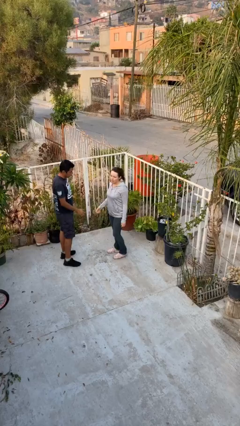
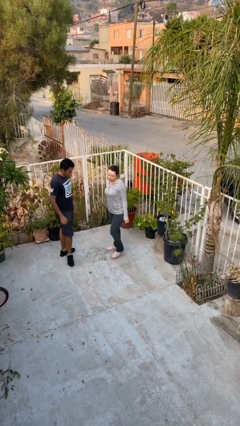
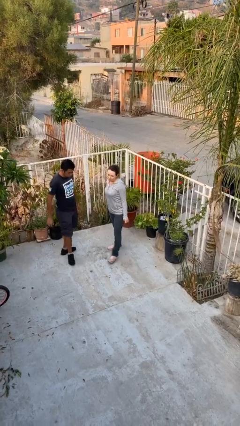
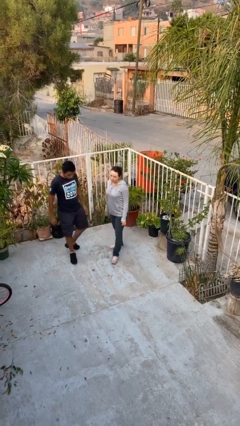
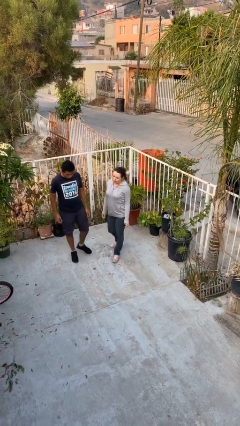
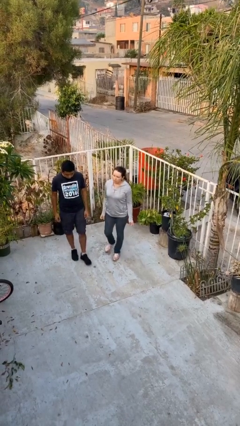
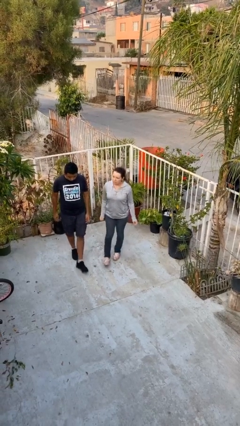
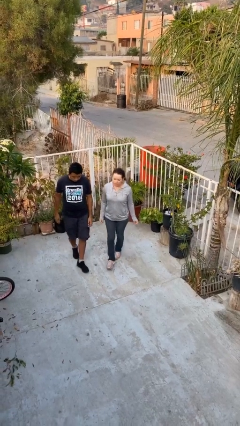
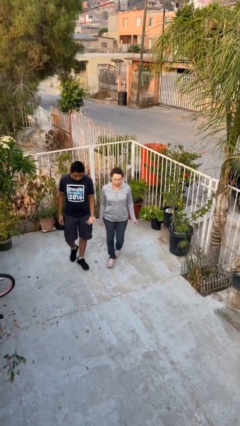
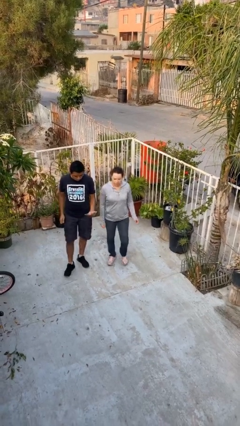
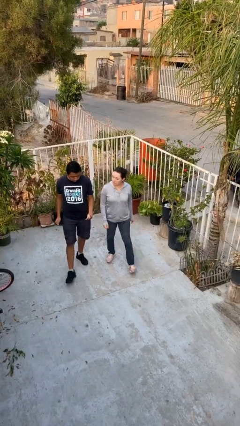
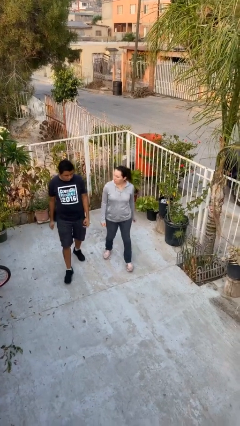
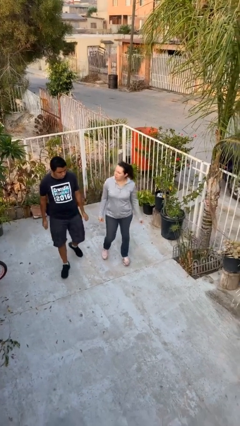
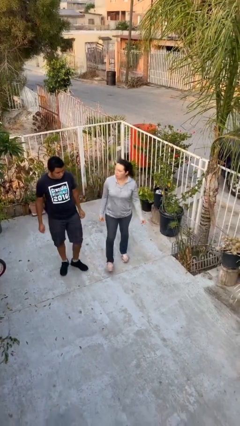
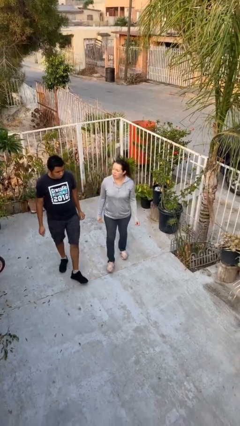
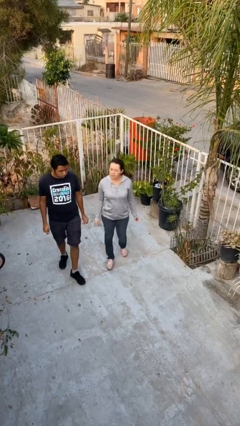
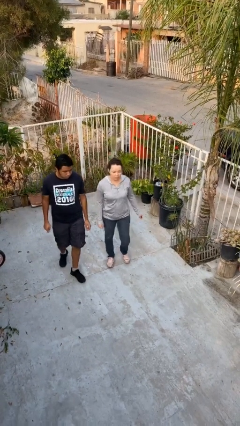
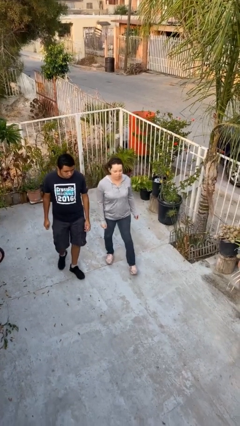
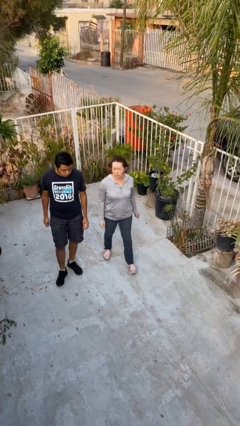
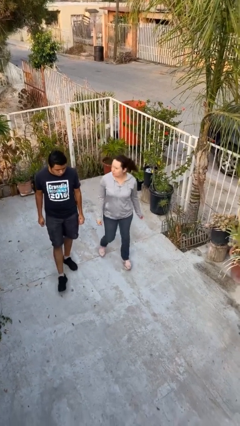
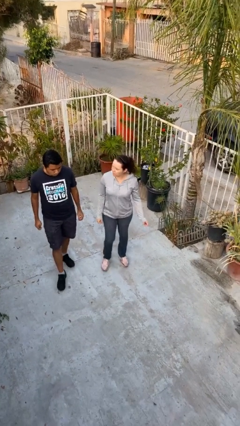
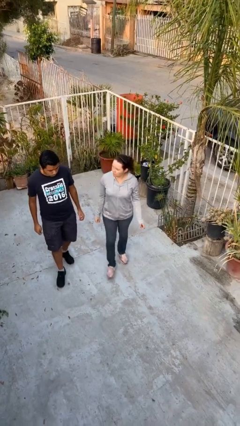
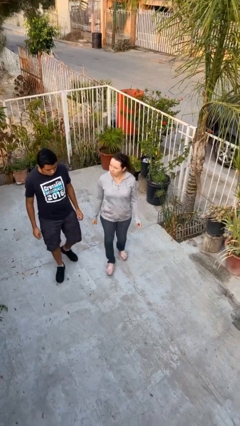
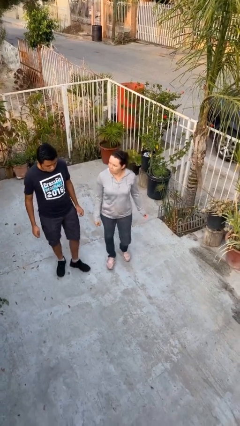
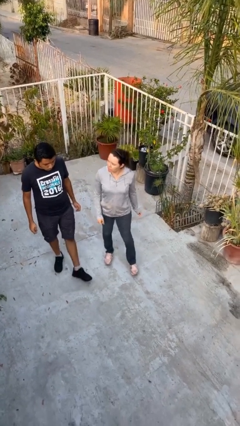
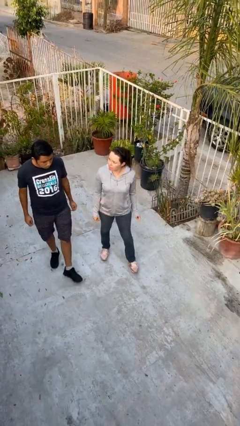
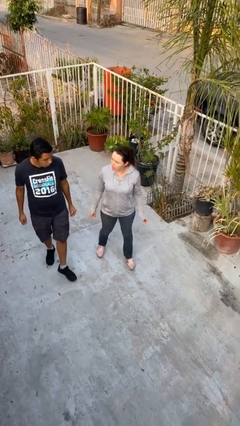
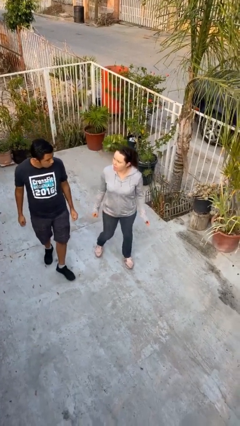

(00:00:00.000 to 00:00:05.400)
person talks to person

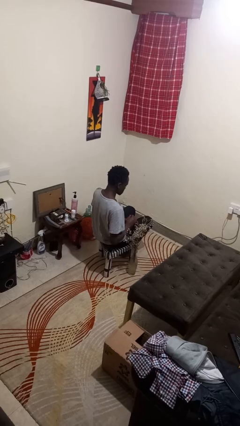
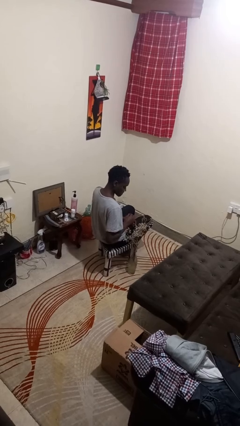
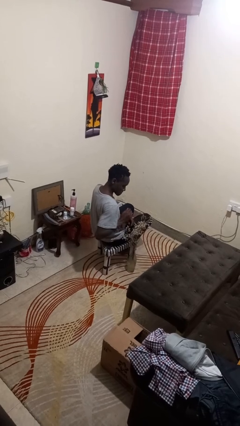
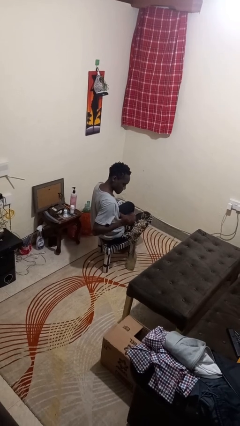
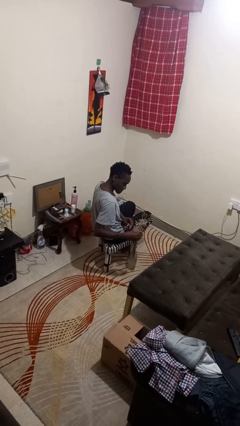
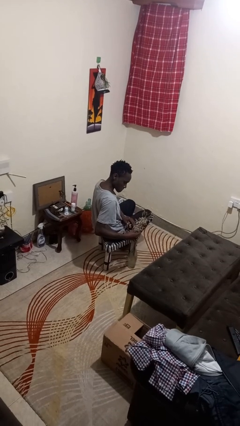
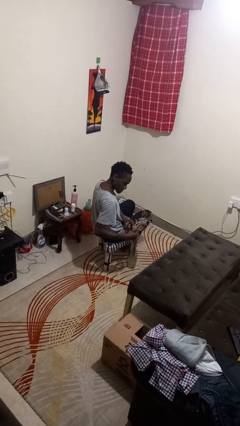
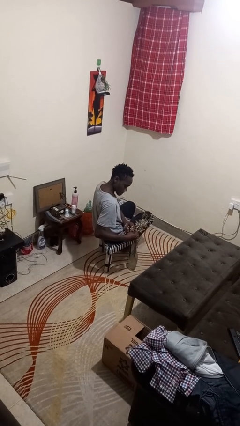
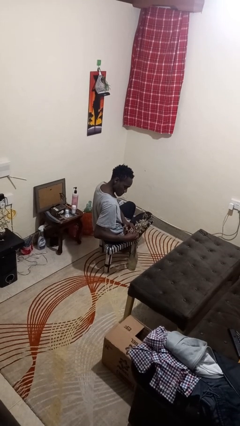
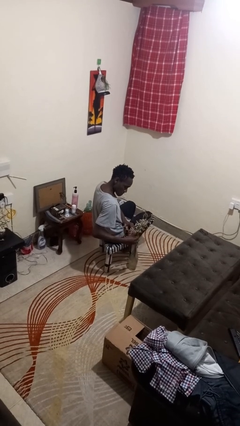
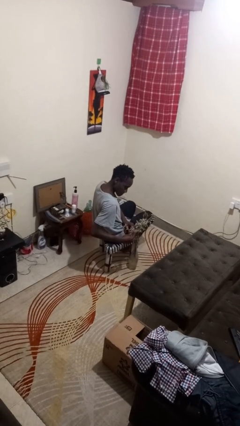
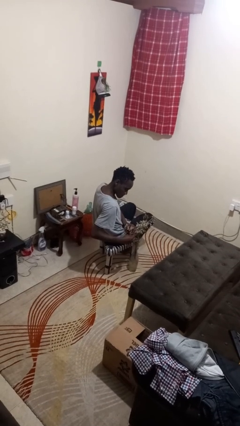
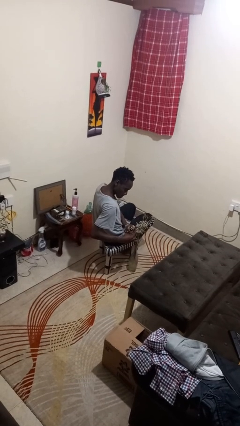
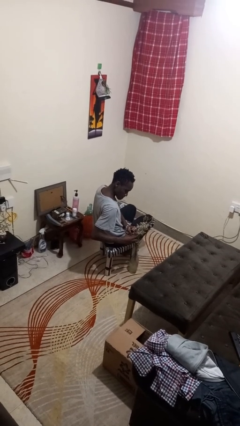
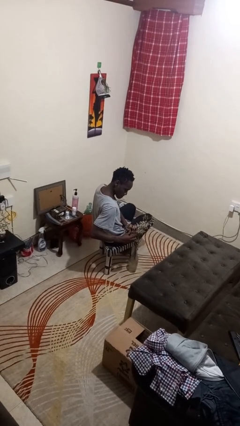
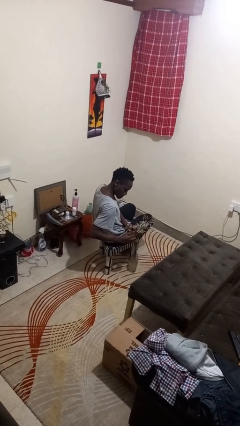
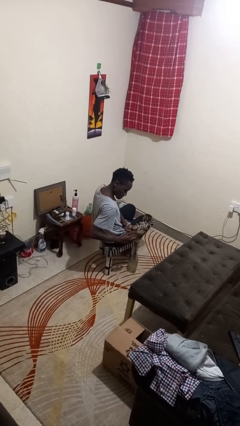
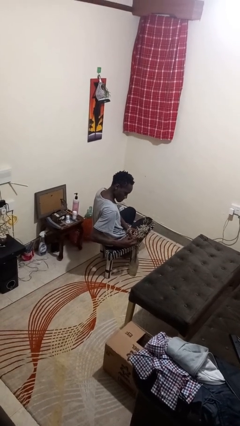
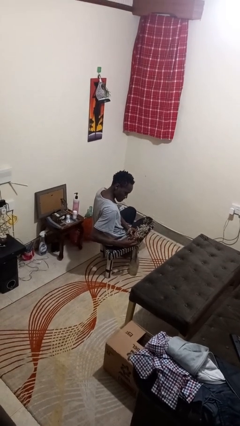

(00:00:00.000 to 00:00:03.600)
person arranges flowers in vase

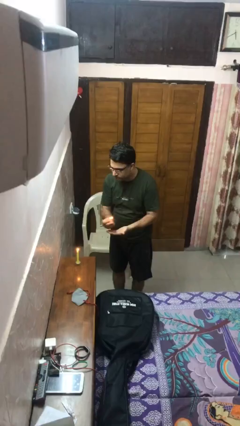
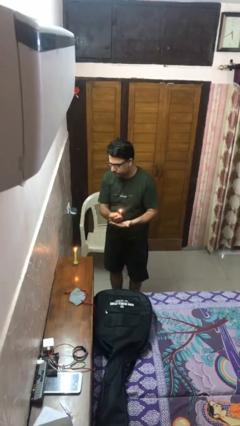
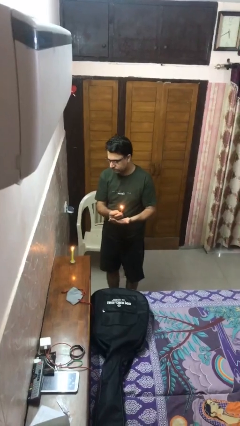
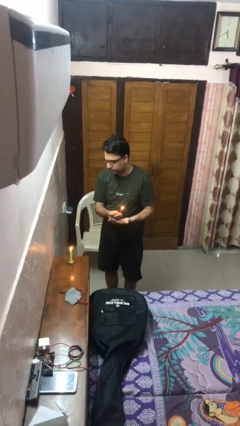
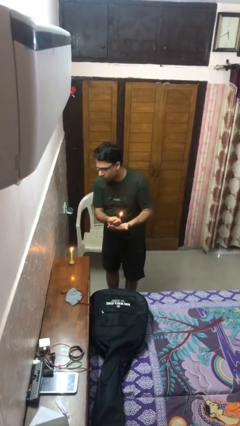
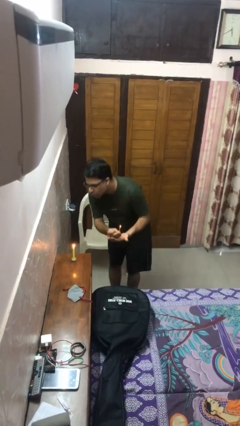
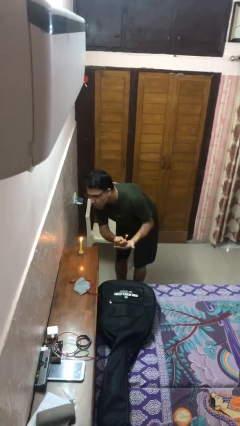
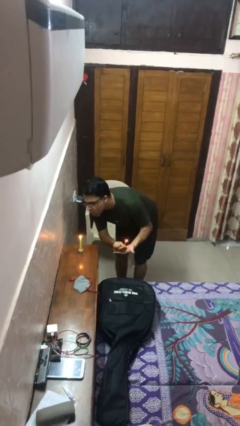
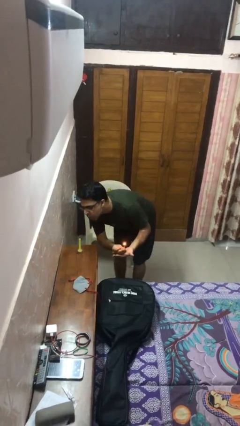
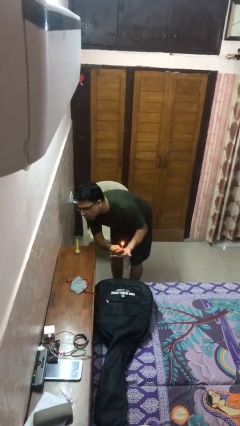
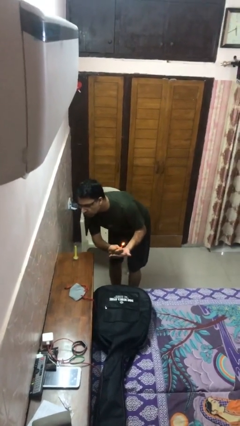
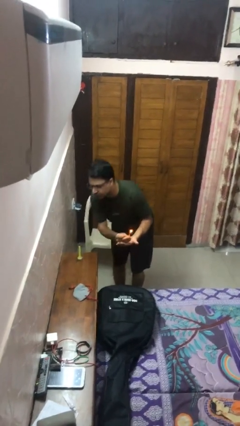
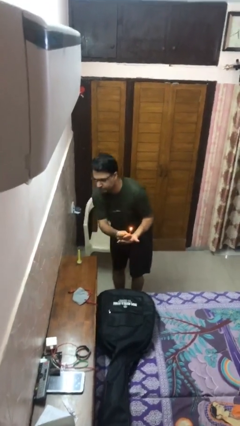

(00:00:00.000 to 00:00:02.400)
person extinguishes candle

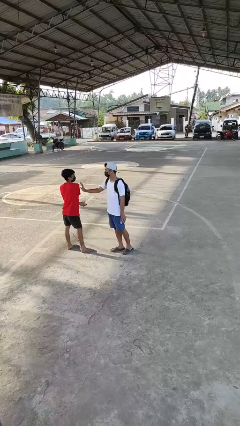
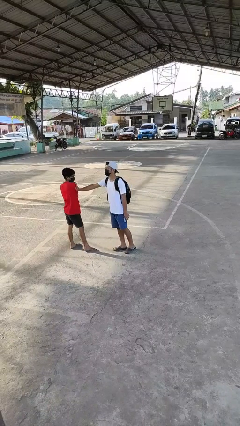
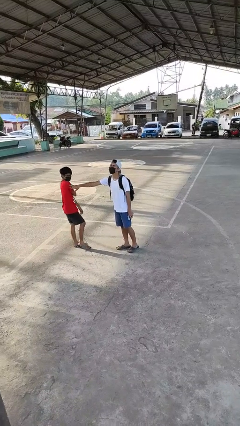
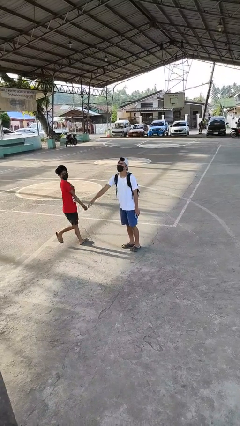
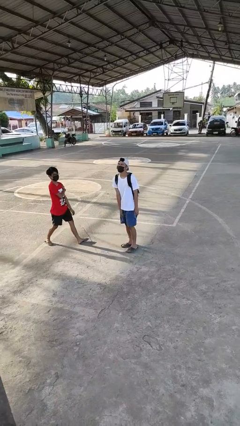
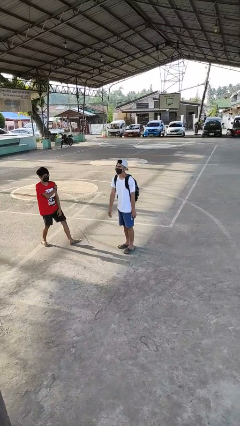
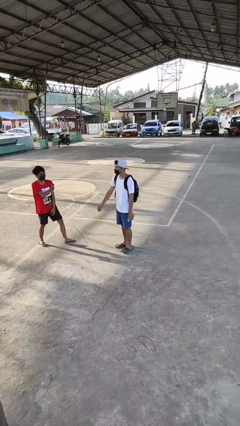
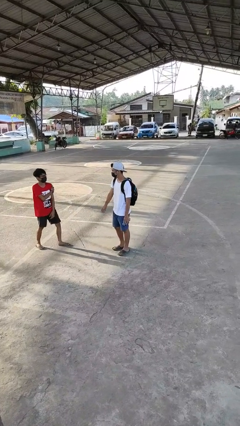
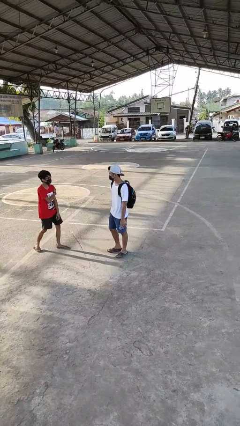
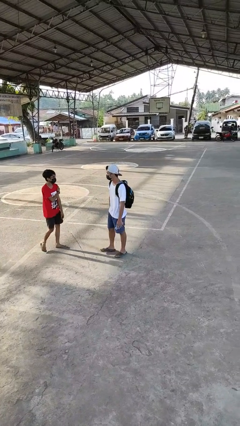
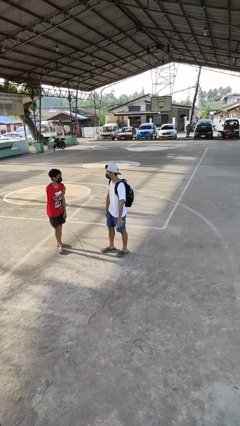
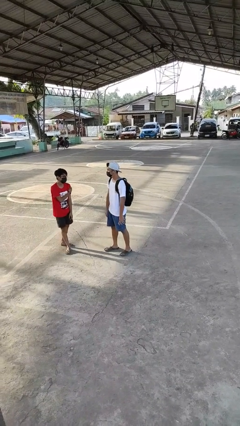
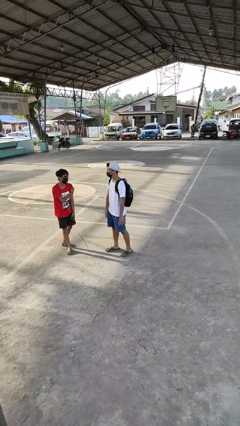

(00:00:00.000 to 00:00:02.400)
person shoves person

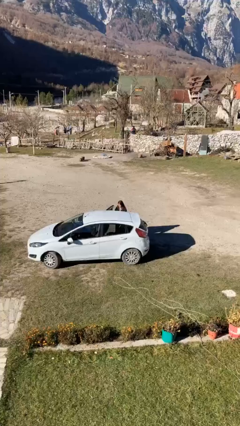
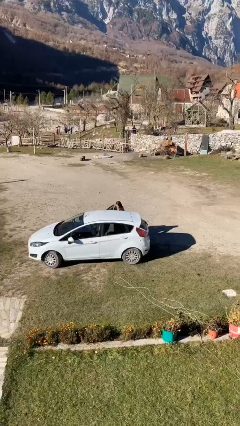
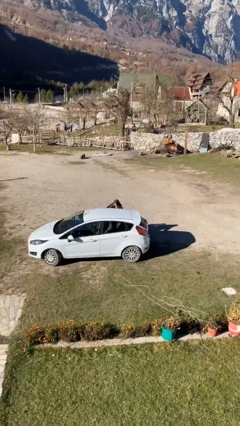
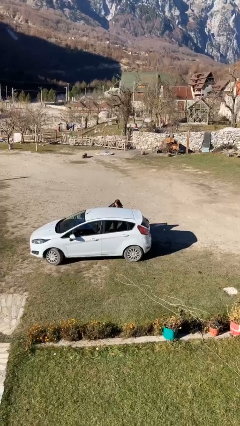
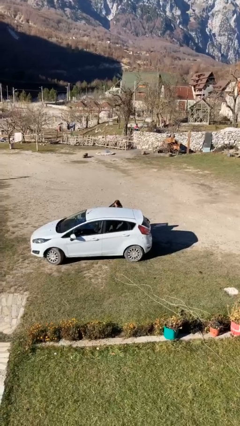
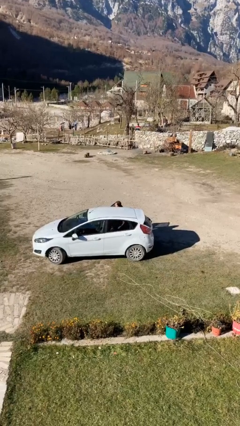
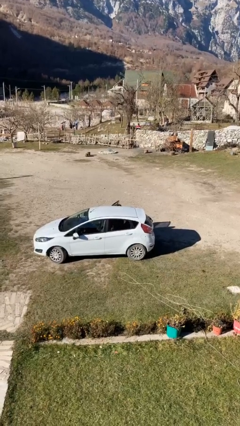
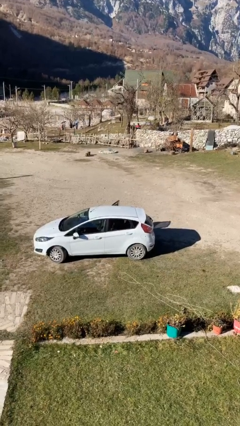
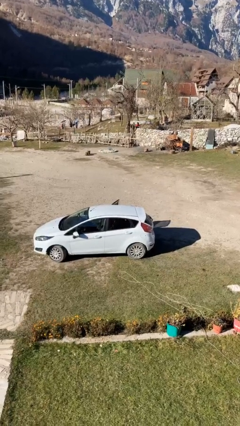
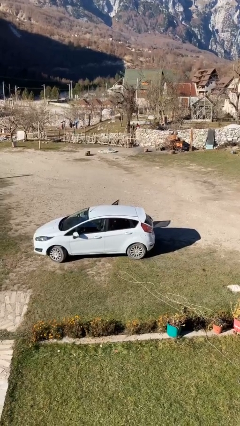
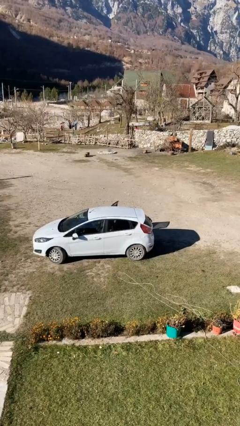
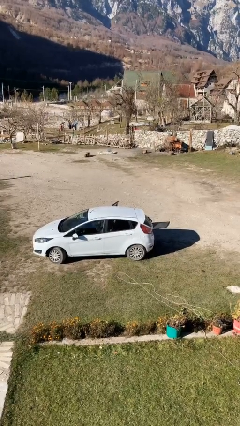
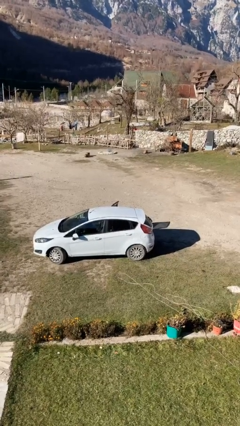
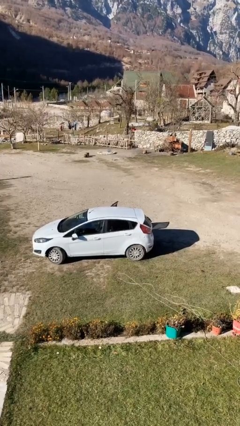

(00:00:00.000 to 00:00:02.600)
person enters car

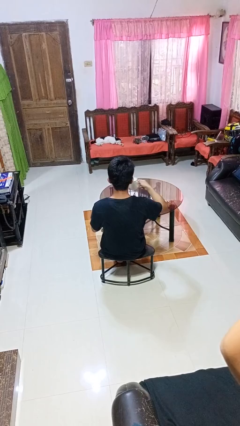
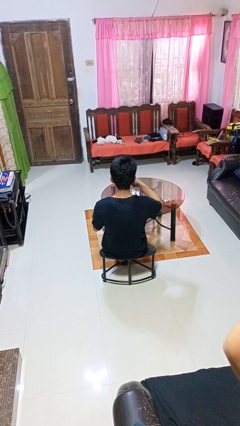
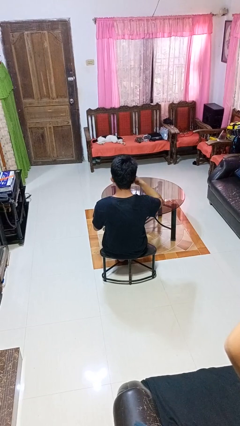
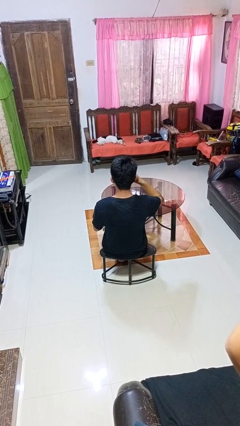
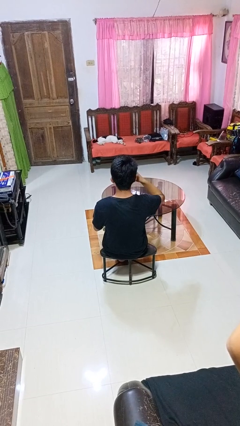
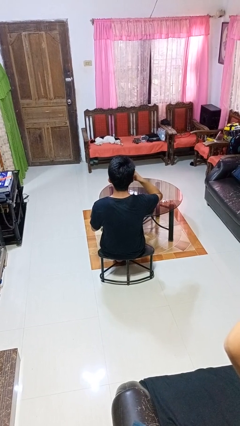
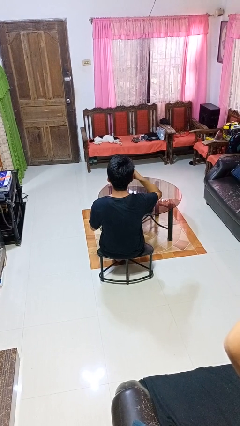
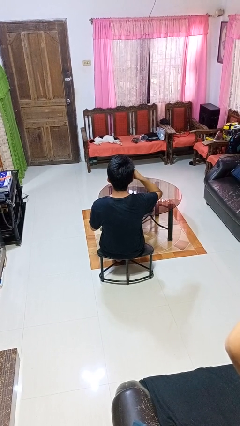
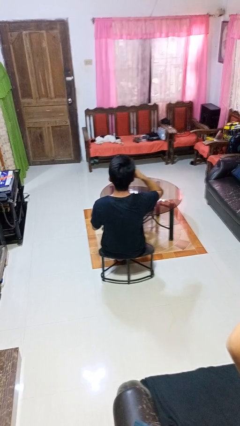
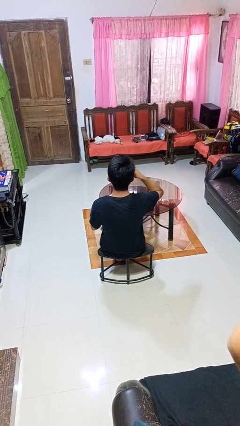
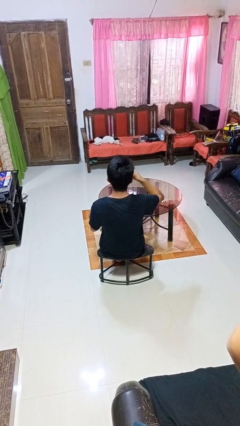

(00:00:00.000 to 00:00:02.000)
person drinks from mug
